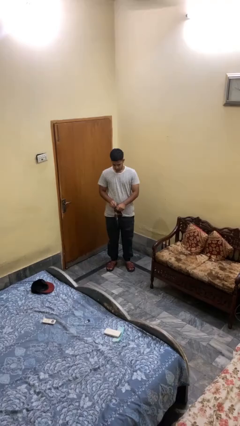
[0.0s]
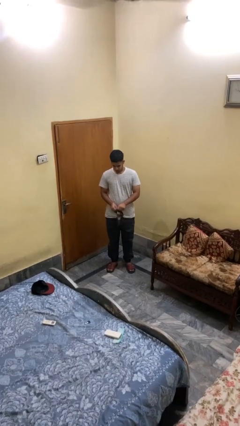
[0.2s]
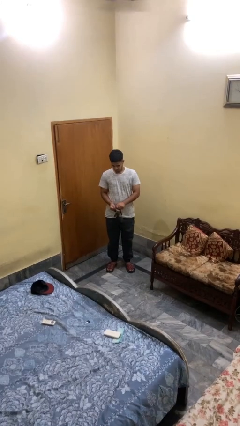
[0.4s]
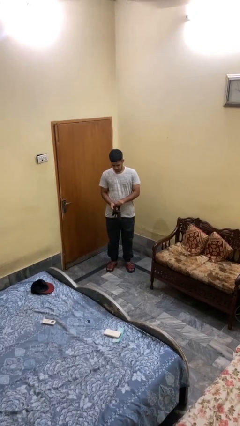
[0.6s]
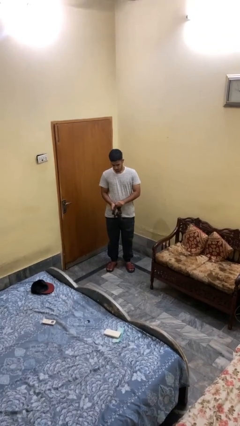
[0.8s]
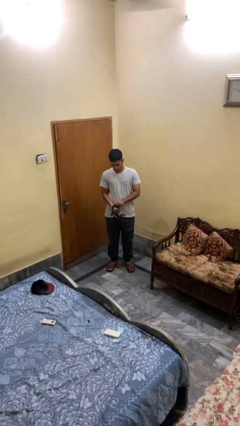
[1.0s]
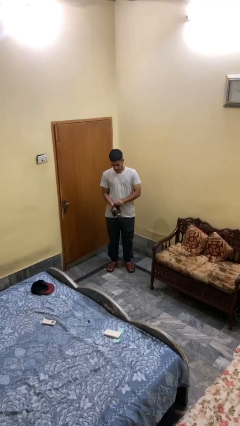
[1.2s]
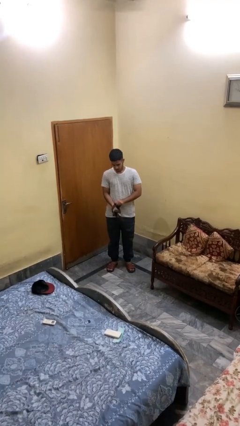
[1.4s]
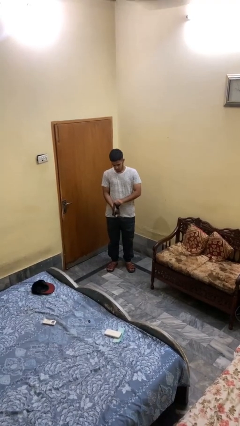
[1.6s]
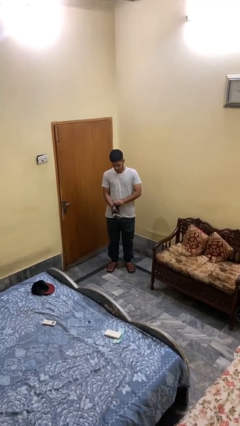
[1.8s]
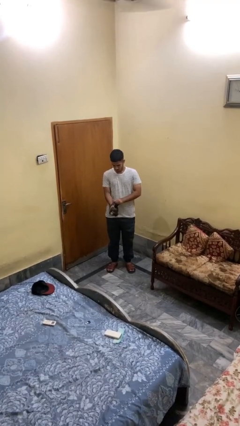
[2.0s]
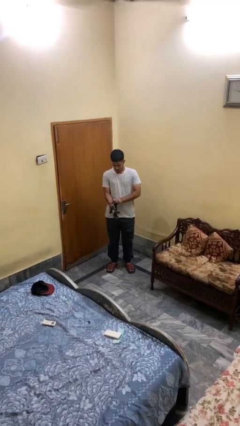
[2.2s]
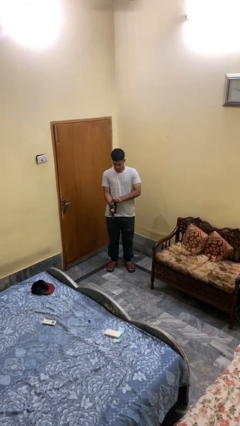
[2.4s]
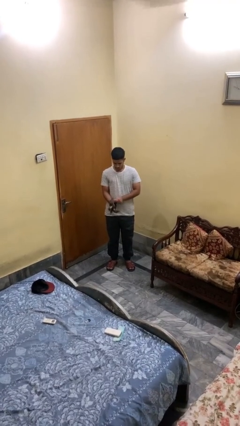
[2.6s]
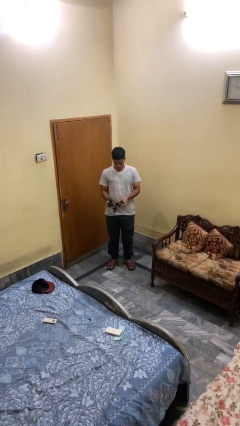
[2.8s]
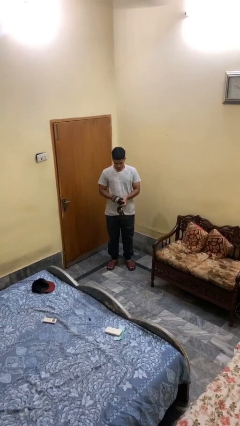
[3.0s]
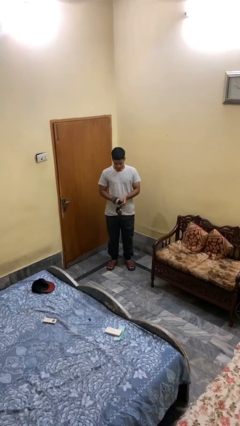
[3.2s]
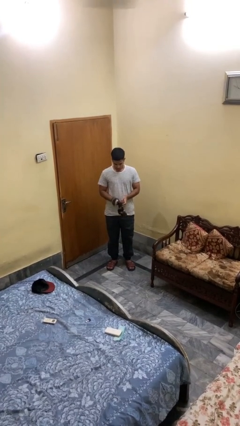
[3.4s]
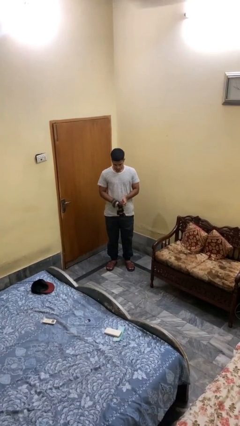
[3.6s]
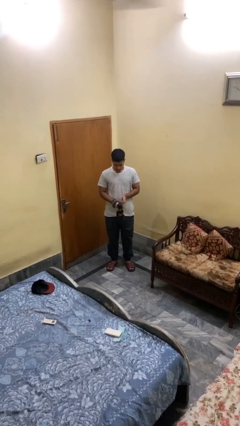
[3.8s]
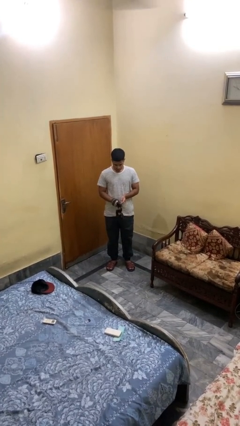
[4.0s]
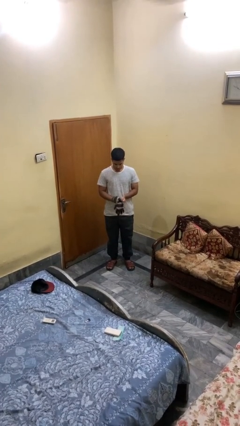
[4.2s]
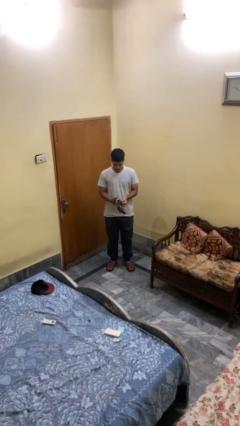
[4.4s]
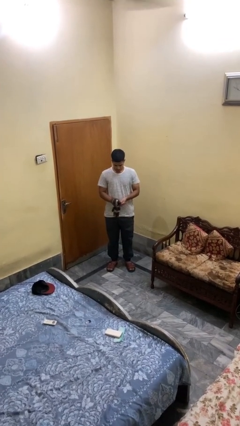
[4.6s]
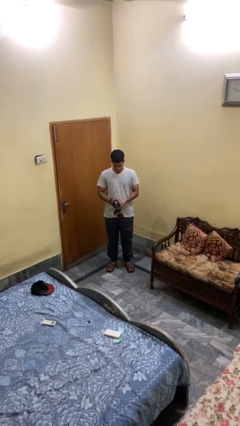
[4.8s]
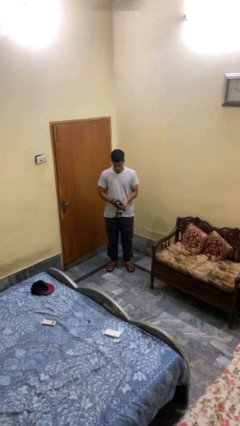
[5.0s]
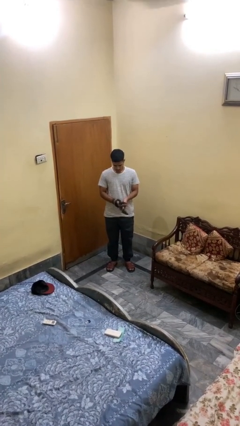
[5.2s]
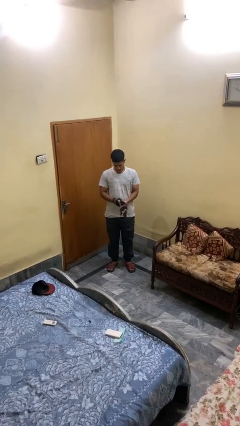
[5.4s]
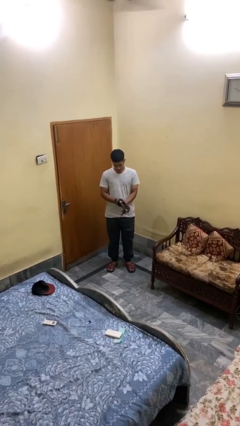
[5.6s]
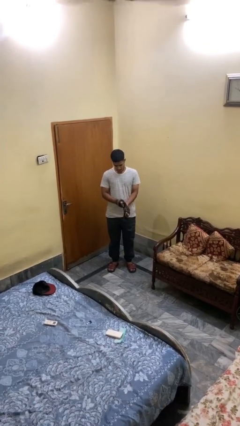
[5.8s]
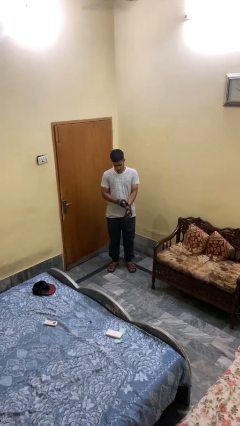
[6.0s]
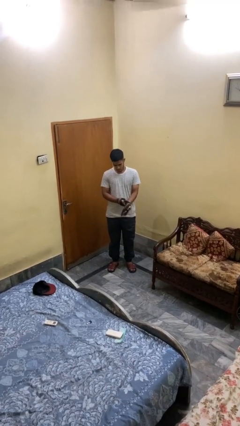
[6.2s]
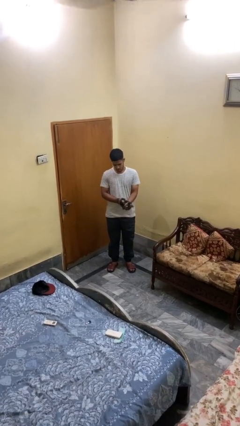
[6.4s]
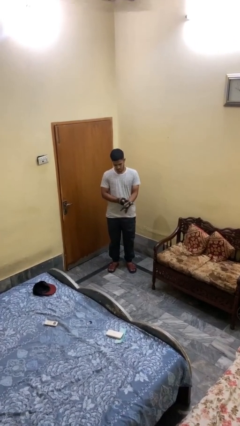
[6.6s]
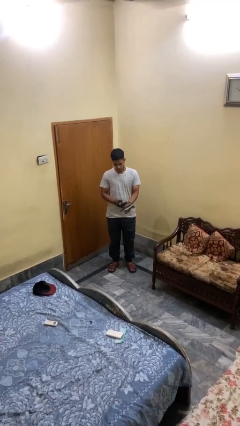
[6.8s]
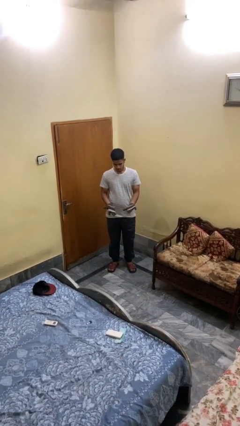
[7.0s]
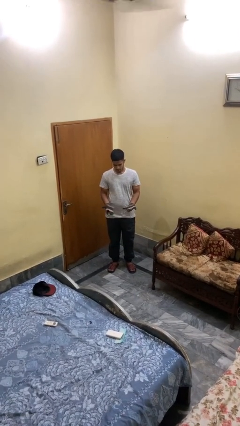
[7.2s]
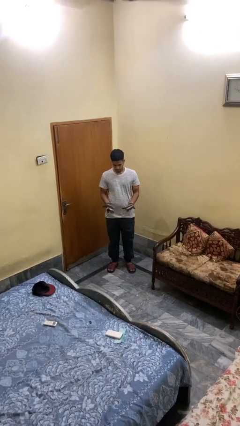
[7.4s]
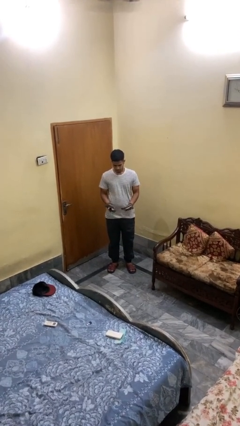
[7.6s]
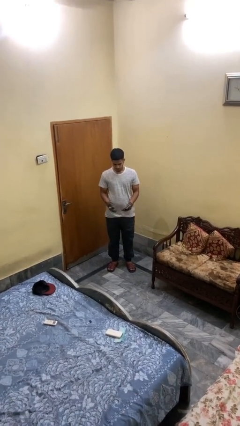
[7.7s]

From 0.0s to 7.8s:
person puts on gloves

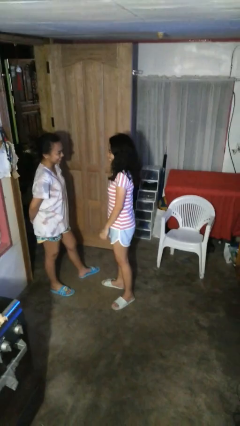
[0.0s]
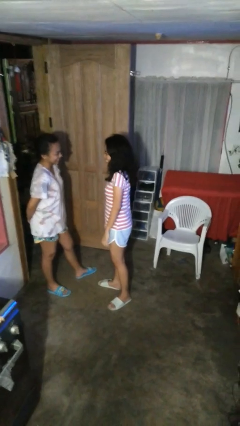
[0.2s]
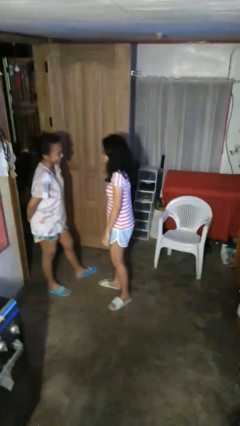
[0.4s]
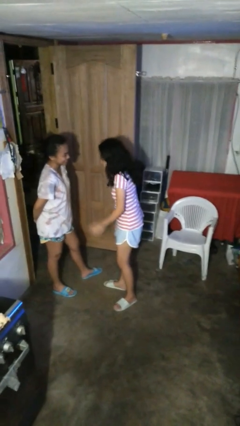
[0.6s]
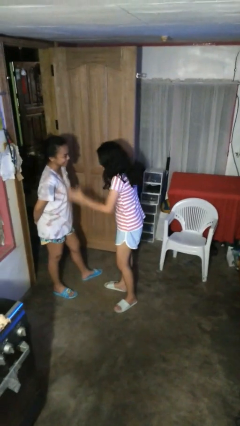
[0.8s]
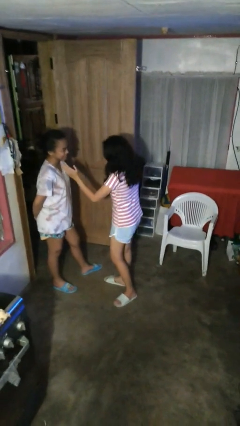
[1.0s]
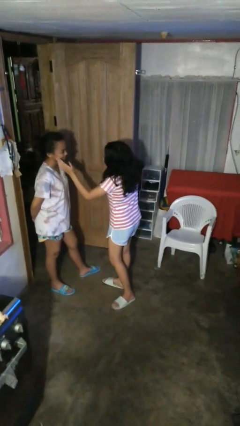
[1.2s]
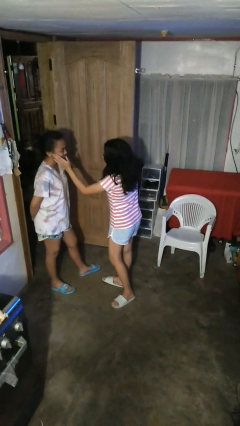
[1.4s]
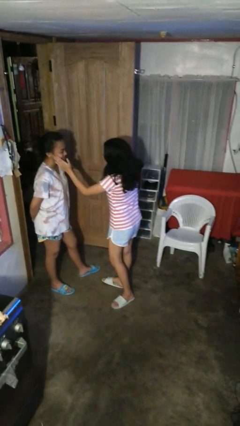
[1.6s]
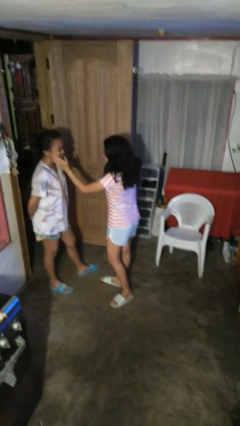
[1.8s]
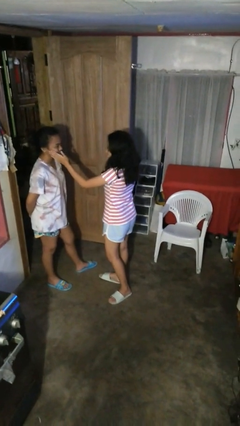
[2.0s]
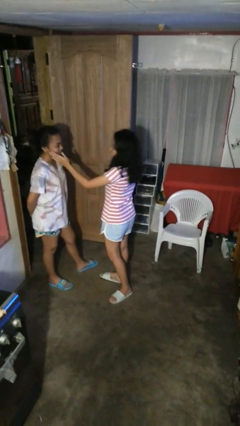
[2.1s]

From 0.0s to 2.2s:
person touches face of person

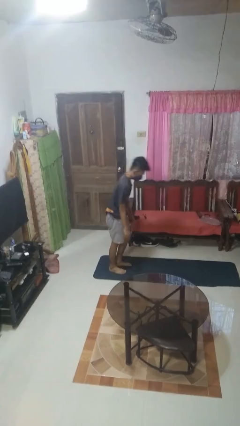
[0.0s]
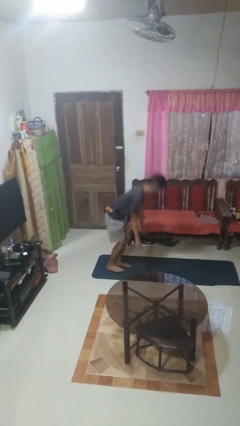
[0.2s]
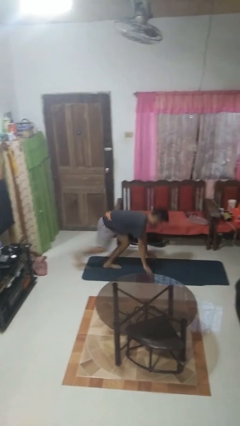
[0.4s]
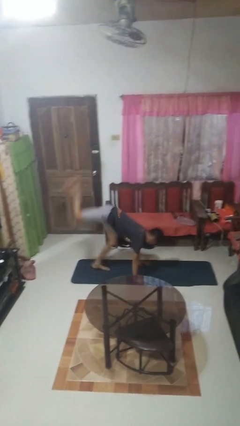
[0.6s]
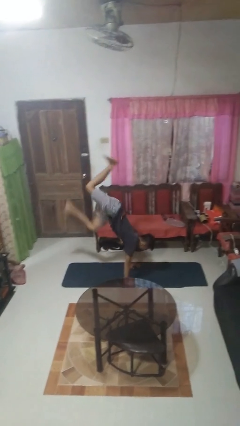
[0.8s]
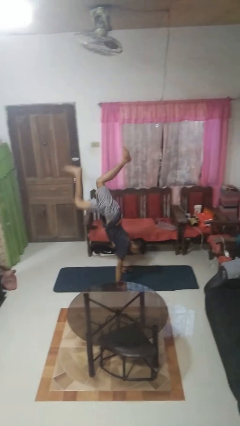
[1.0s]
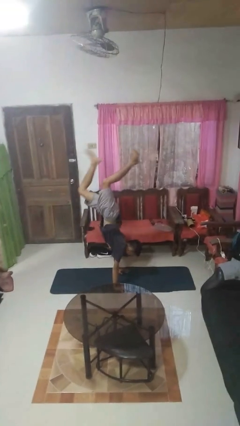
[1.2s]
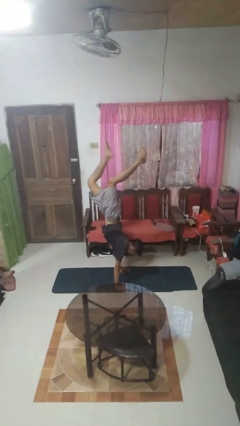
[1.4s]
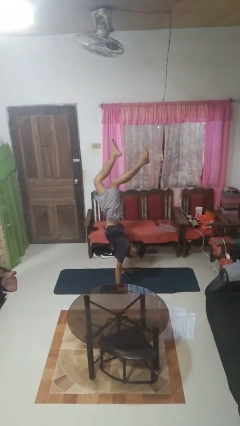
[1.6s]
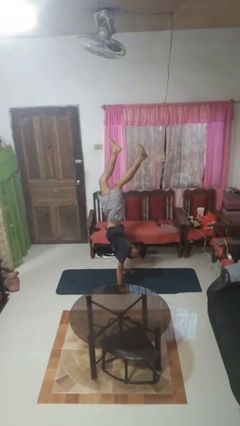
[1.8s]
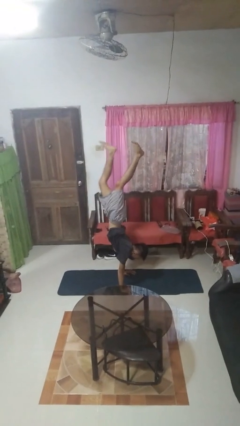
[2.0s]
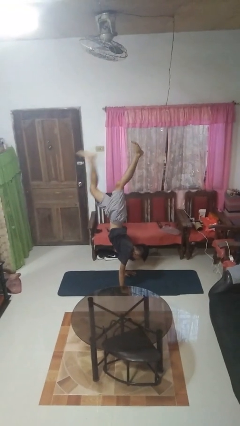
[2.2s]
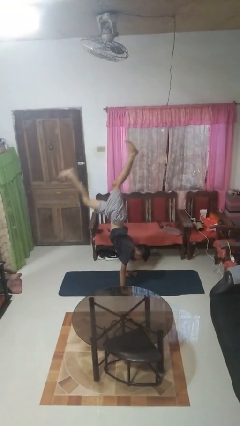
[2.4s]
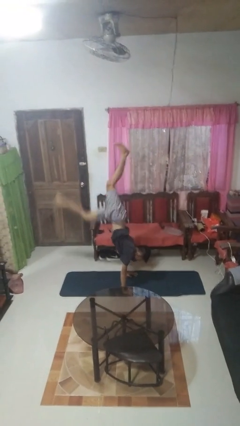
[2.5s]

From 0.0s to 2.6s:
person handstand

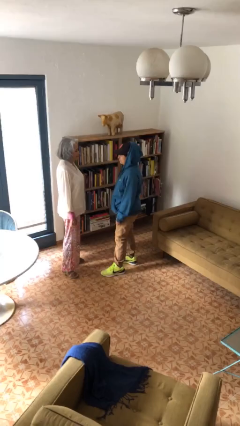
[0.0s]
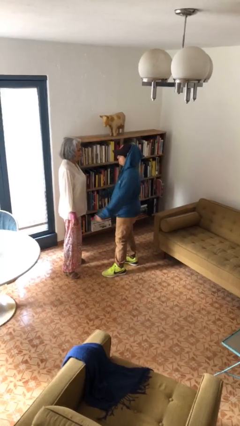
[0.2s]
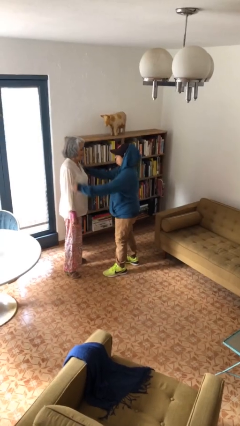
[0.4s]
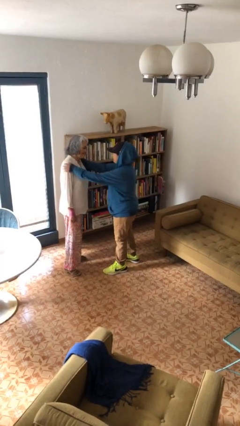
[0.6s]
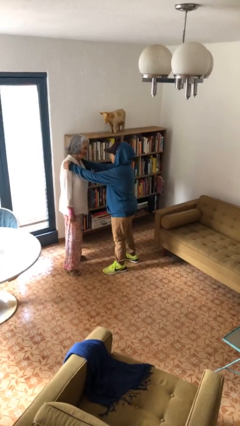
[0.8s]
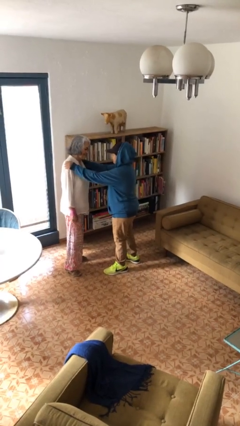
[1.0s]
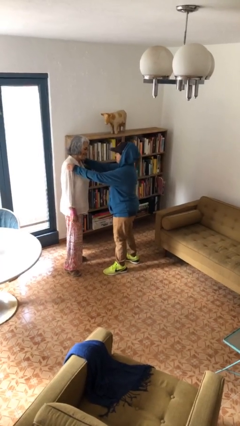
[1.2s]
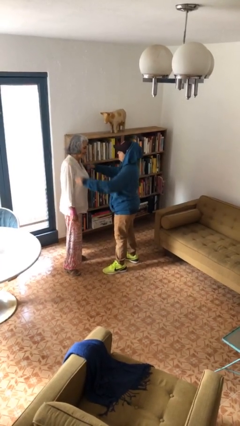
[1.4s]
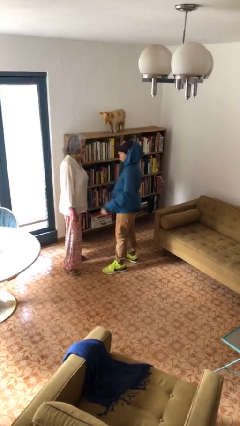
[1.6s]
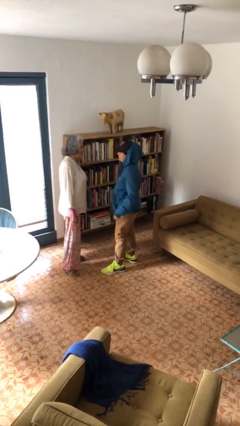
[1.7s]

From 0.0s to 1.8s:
person pounds shoulders of person

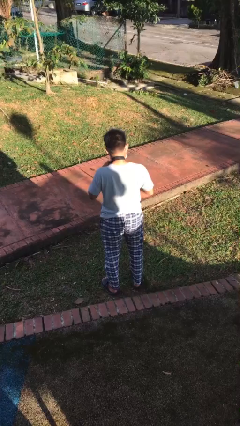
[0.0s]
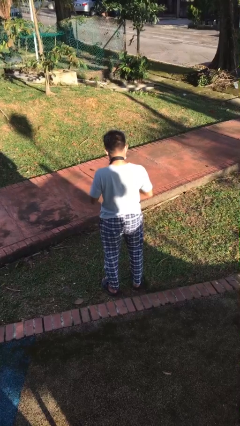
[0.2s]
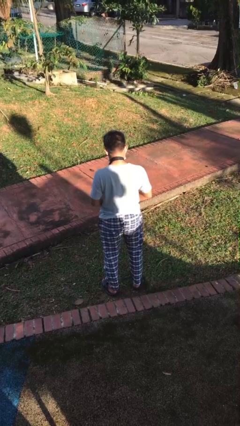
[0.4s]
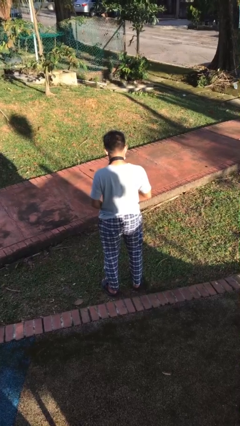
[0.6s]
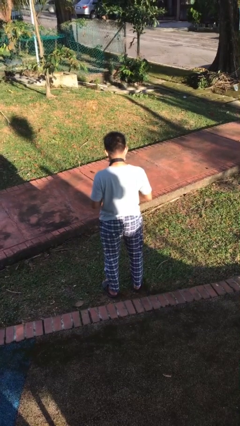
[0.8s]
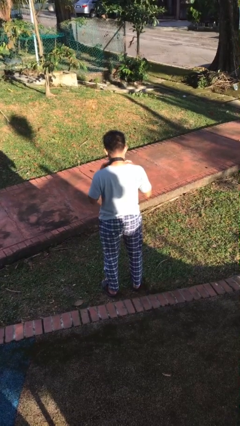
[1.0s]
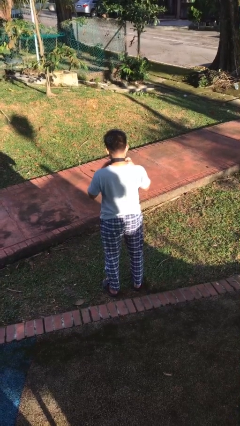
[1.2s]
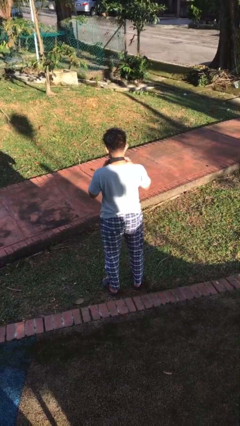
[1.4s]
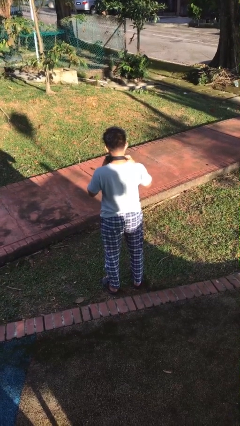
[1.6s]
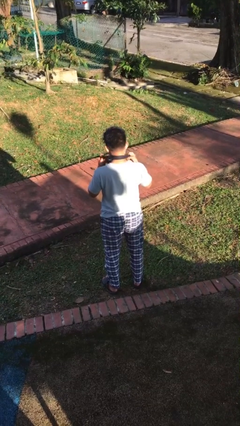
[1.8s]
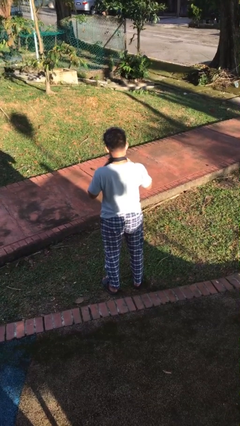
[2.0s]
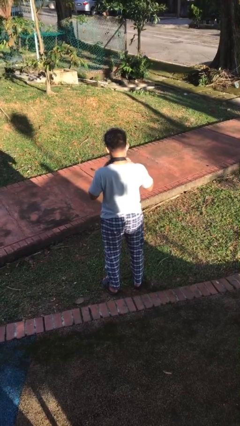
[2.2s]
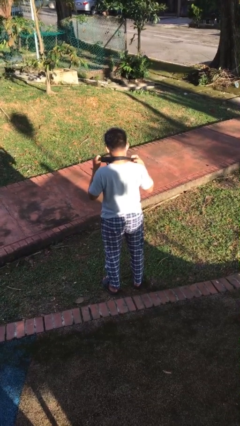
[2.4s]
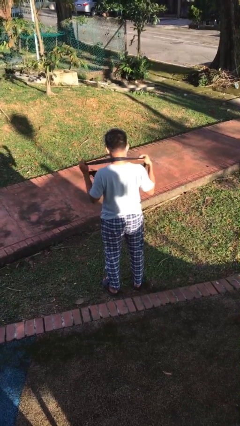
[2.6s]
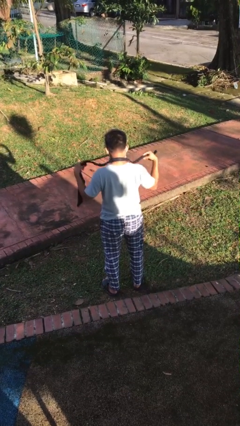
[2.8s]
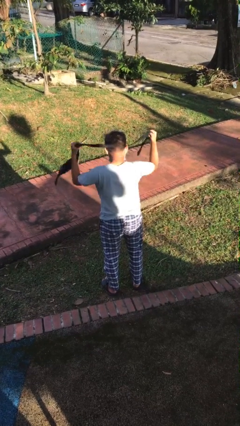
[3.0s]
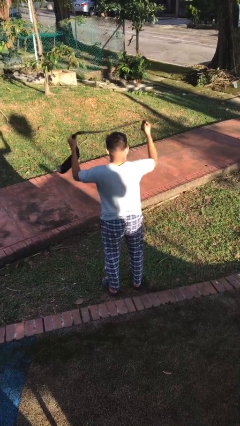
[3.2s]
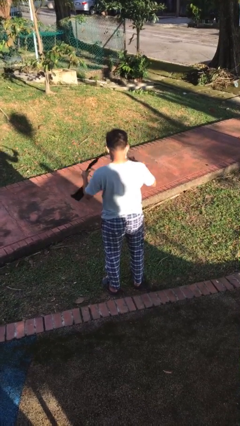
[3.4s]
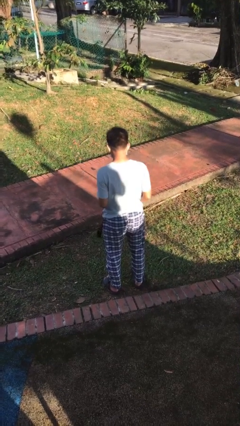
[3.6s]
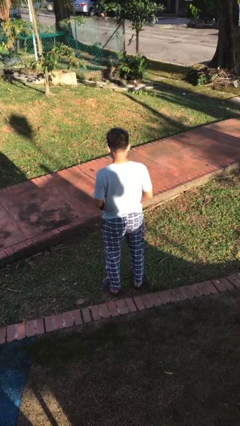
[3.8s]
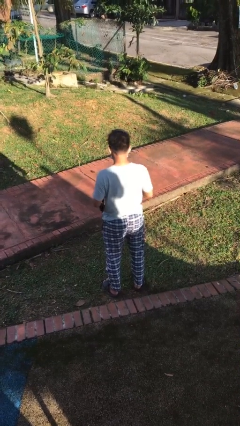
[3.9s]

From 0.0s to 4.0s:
person takes off necktie
